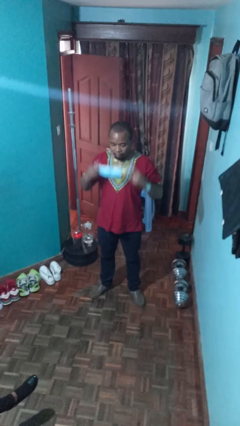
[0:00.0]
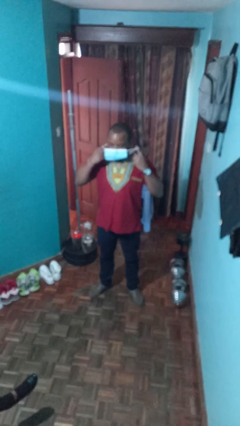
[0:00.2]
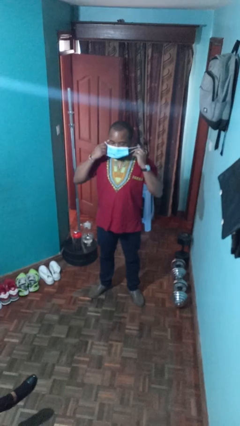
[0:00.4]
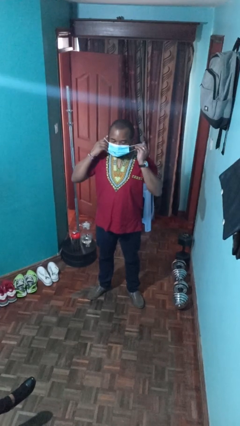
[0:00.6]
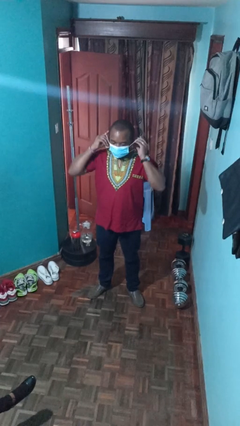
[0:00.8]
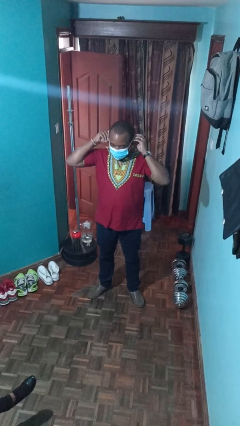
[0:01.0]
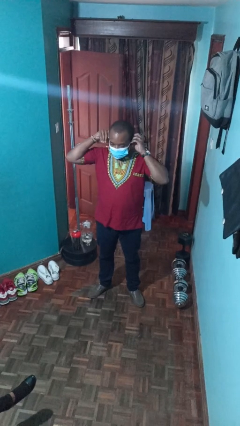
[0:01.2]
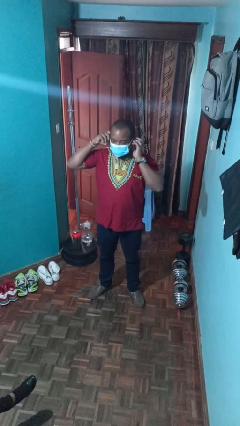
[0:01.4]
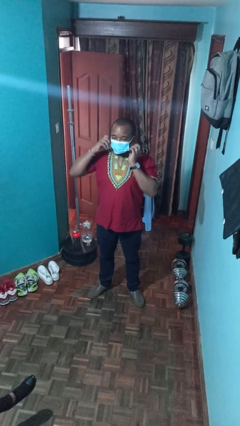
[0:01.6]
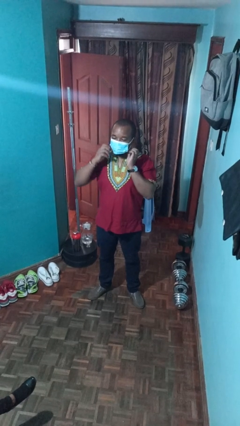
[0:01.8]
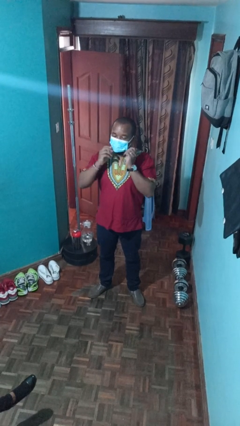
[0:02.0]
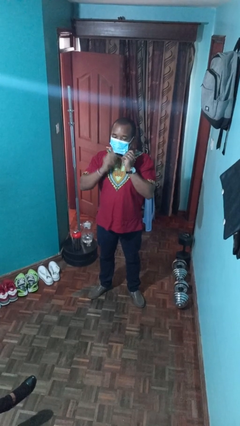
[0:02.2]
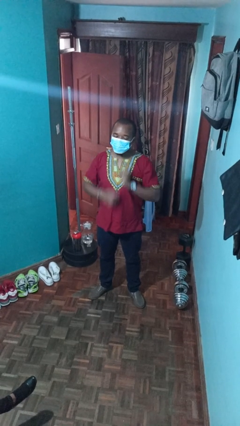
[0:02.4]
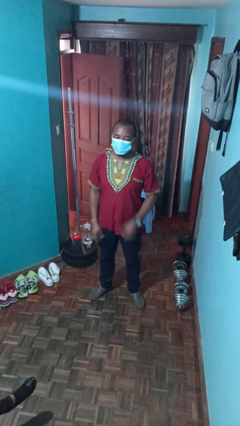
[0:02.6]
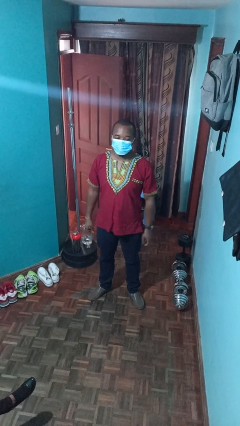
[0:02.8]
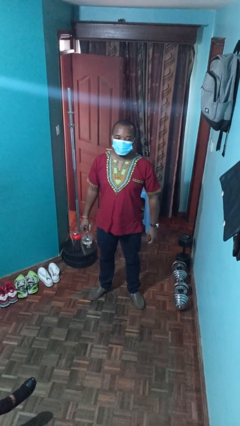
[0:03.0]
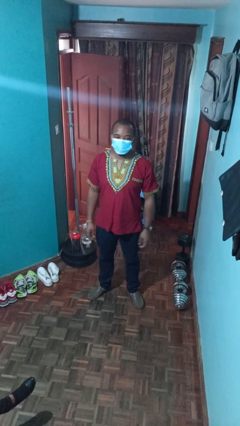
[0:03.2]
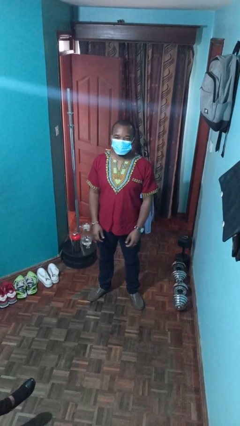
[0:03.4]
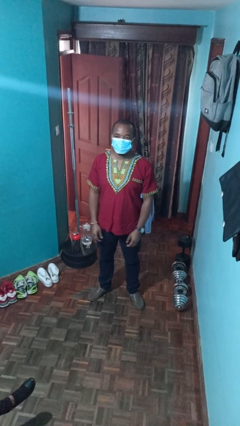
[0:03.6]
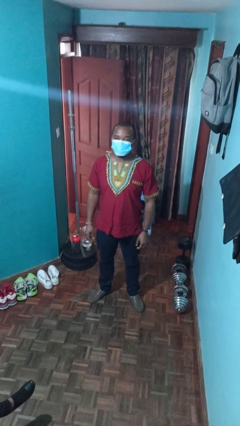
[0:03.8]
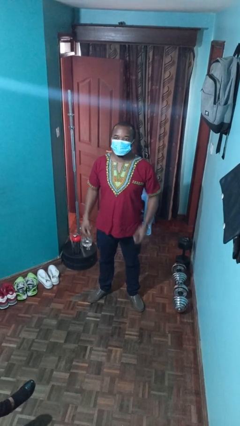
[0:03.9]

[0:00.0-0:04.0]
person puts on facemask

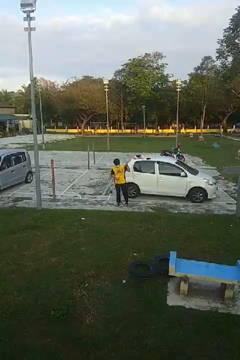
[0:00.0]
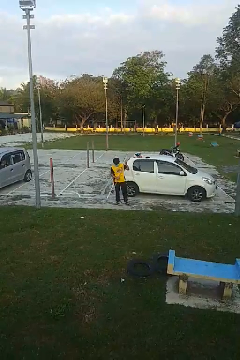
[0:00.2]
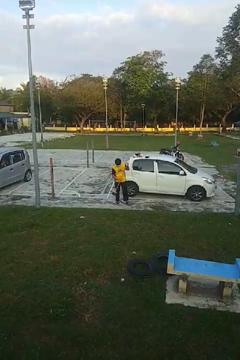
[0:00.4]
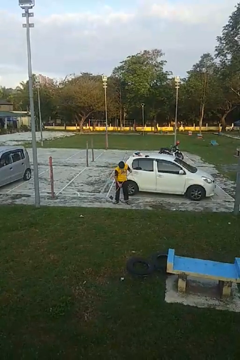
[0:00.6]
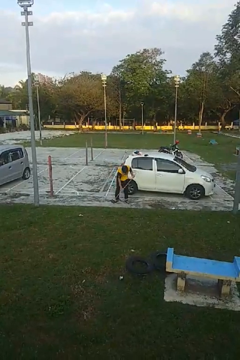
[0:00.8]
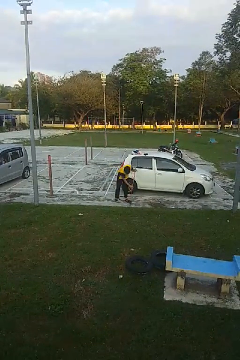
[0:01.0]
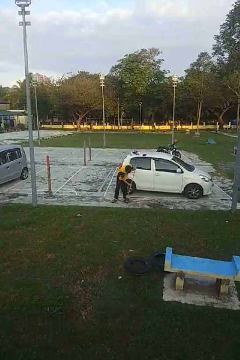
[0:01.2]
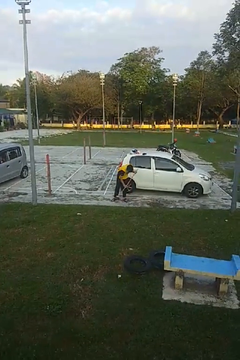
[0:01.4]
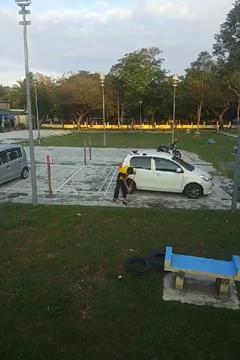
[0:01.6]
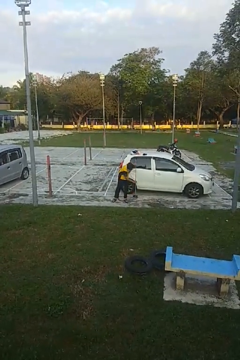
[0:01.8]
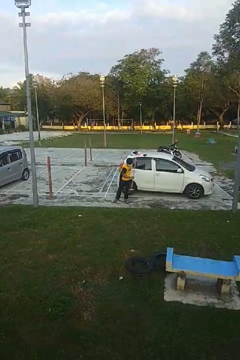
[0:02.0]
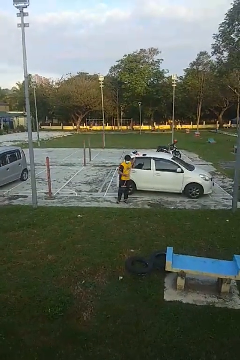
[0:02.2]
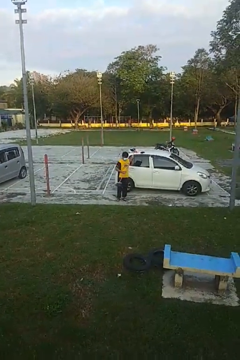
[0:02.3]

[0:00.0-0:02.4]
person sweeps floor

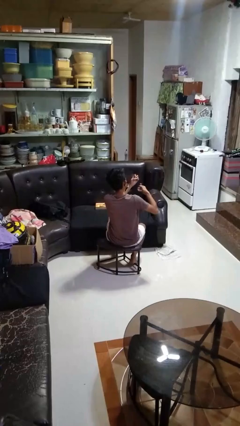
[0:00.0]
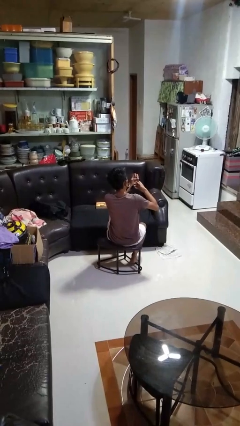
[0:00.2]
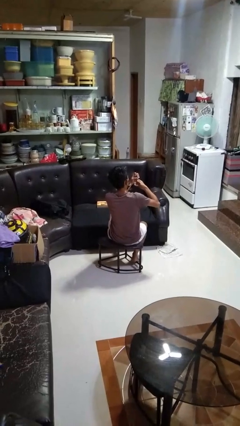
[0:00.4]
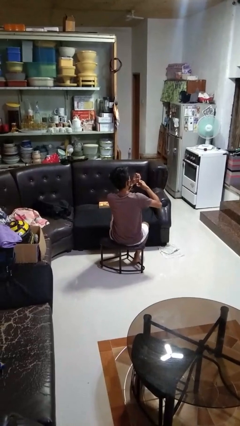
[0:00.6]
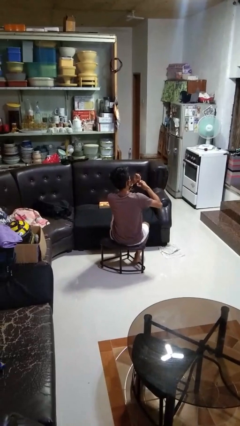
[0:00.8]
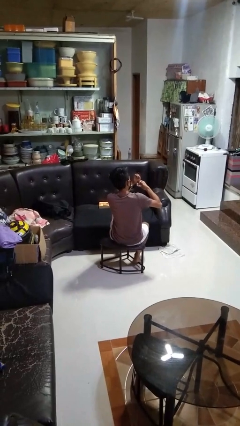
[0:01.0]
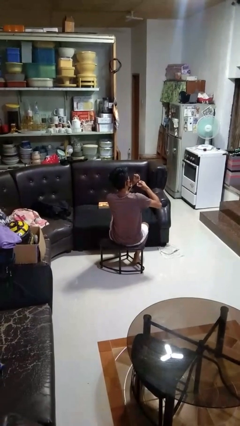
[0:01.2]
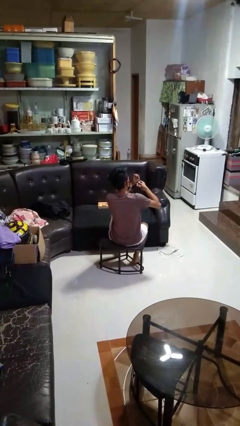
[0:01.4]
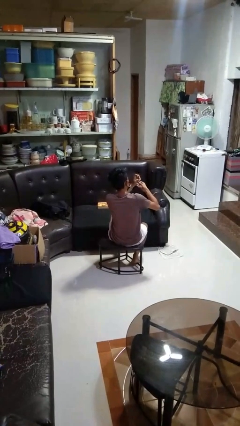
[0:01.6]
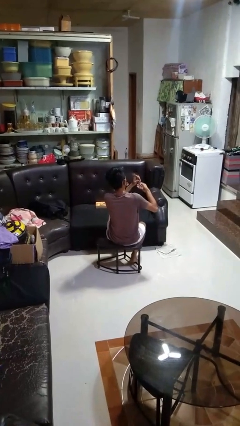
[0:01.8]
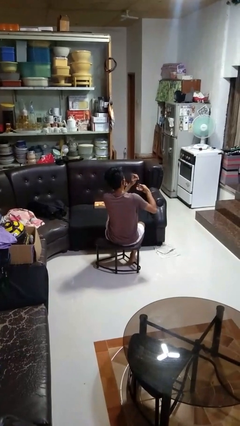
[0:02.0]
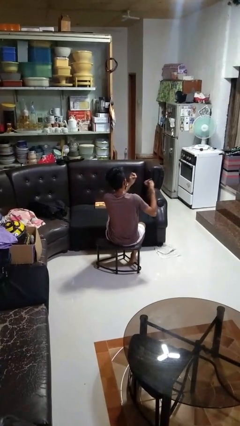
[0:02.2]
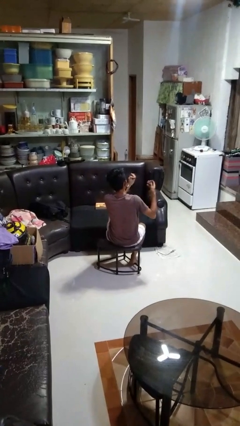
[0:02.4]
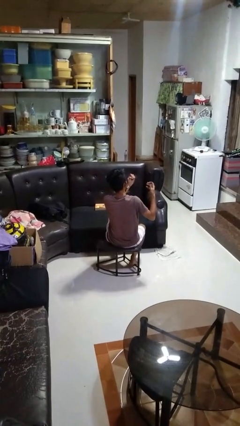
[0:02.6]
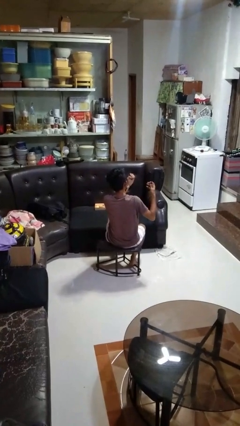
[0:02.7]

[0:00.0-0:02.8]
person clips fingernails

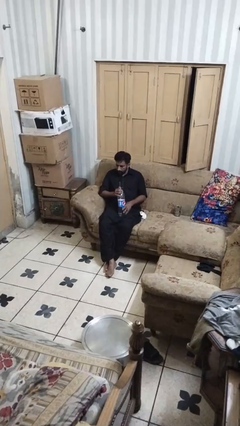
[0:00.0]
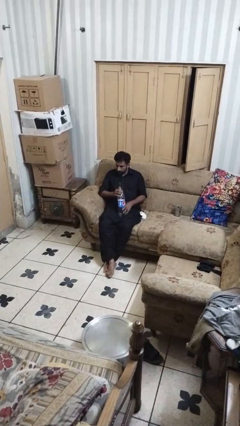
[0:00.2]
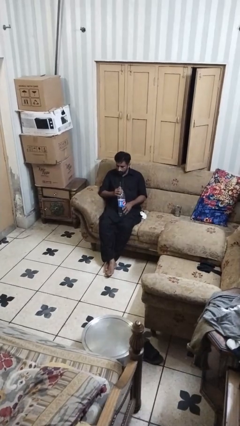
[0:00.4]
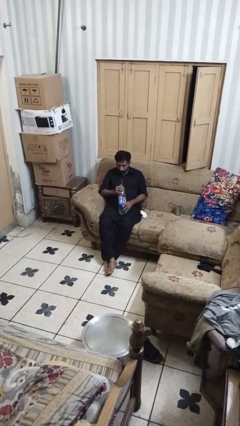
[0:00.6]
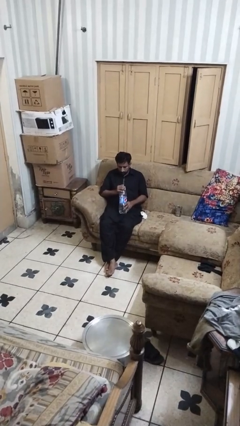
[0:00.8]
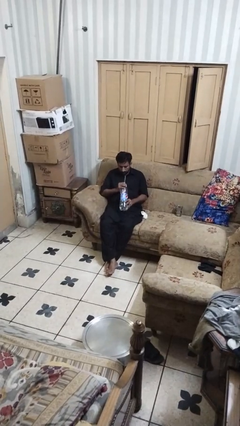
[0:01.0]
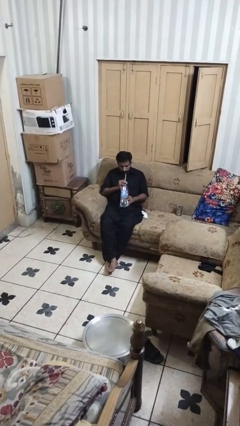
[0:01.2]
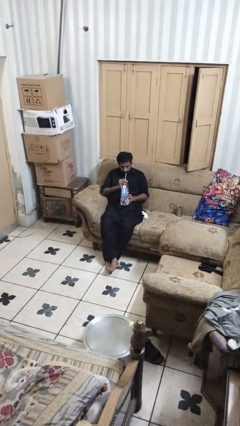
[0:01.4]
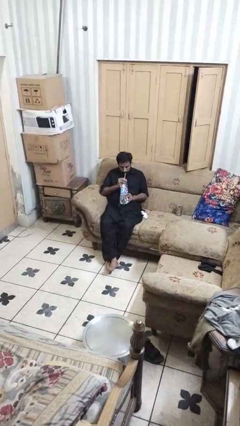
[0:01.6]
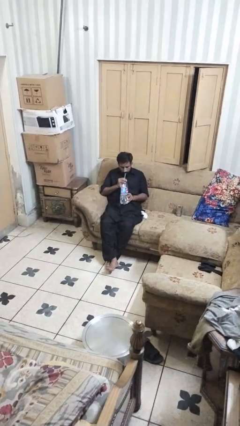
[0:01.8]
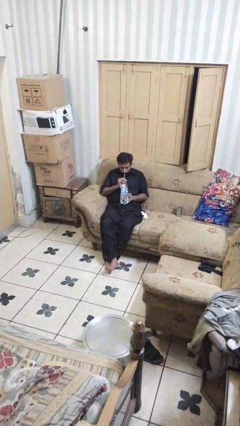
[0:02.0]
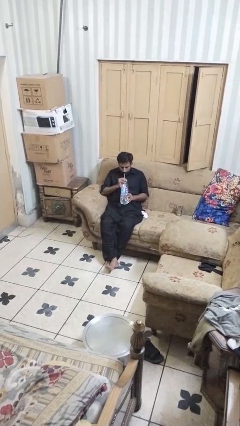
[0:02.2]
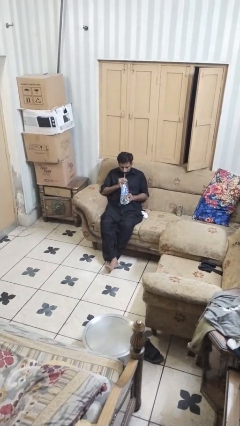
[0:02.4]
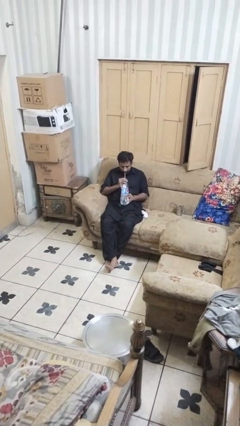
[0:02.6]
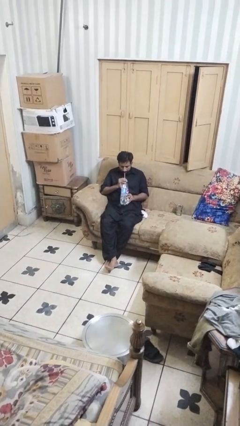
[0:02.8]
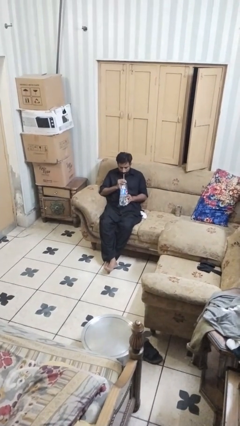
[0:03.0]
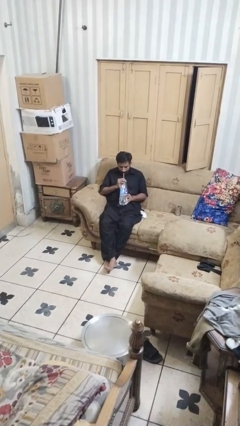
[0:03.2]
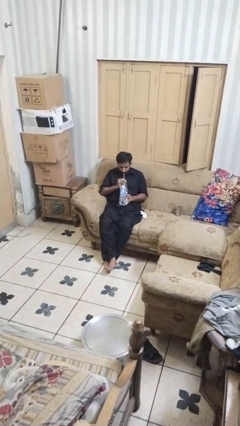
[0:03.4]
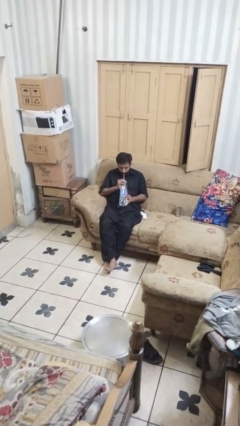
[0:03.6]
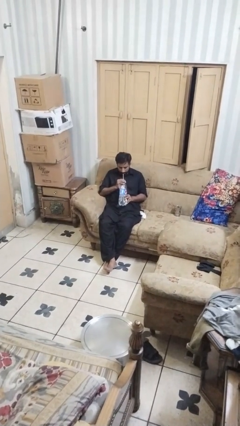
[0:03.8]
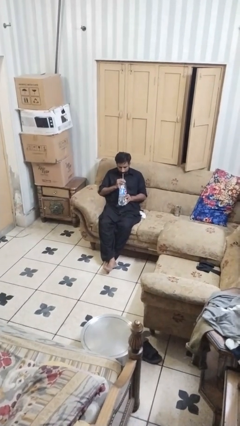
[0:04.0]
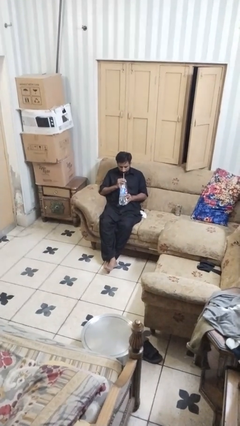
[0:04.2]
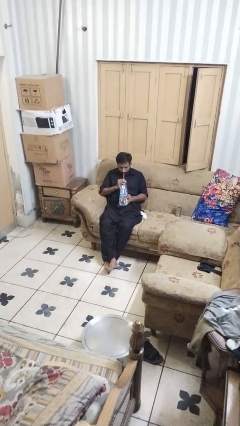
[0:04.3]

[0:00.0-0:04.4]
person drinks from straw

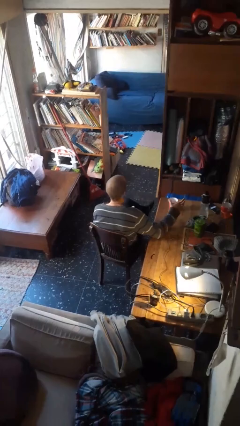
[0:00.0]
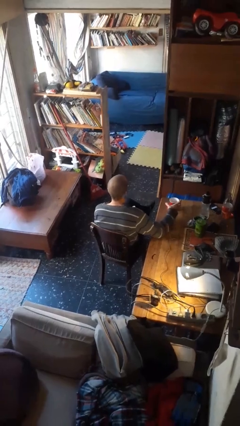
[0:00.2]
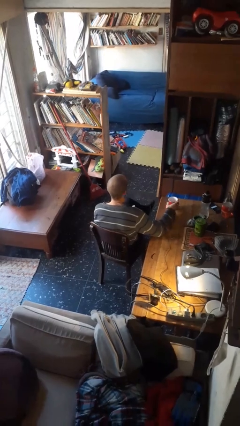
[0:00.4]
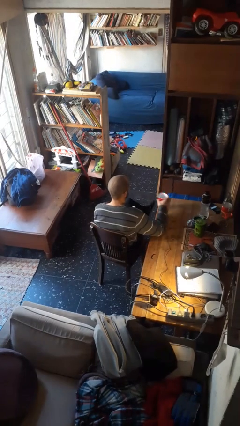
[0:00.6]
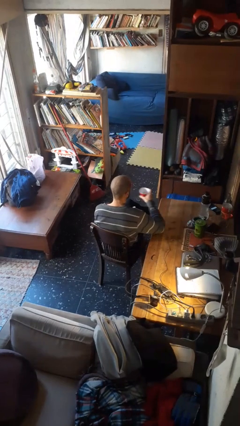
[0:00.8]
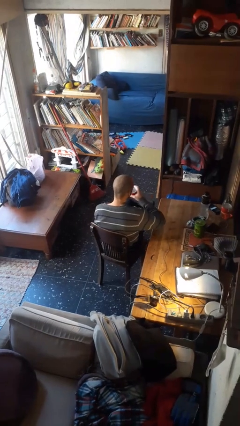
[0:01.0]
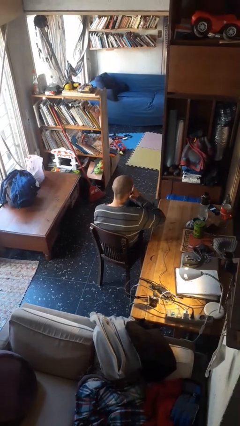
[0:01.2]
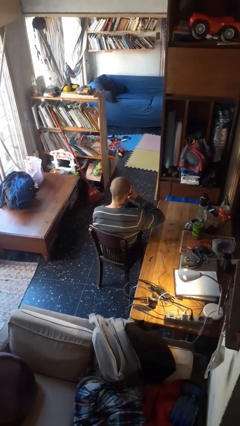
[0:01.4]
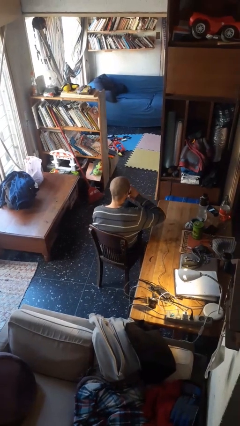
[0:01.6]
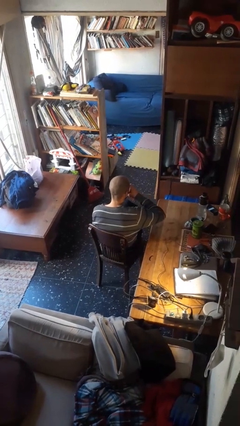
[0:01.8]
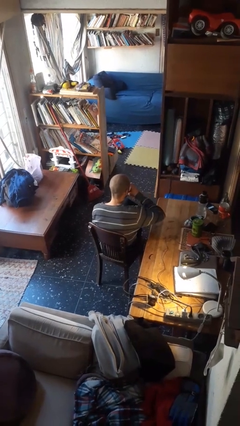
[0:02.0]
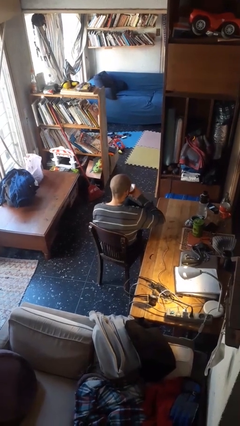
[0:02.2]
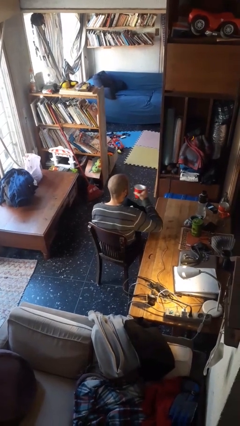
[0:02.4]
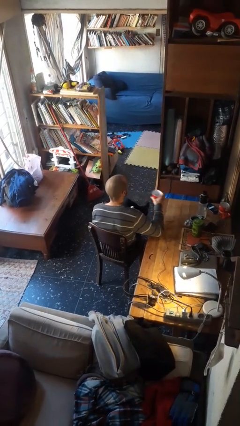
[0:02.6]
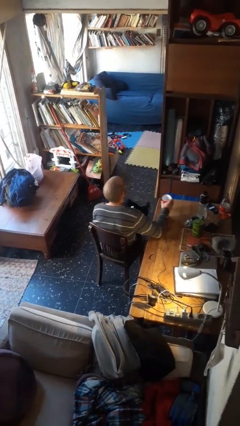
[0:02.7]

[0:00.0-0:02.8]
person drinks from cup

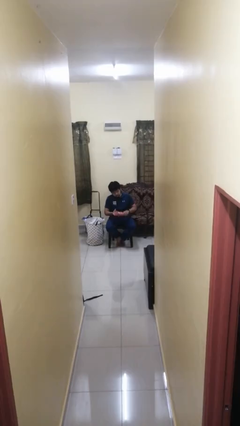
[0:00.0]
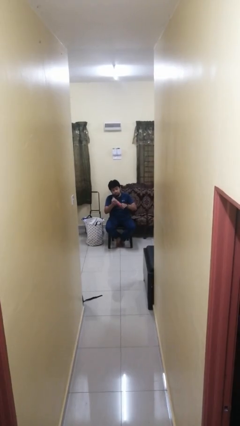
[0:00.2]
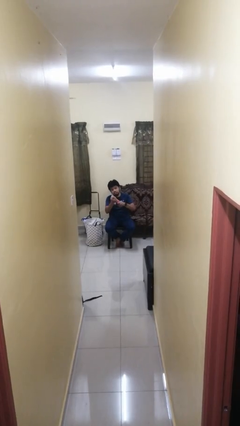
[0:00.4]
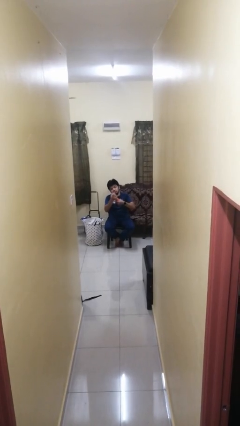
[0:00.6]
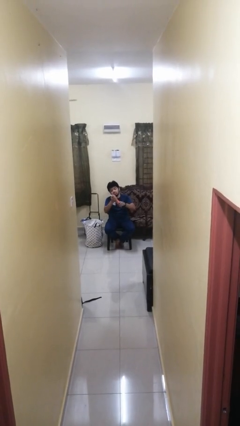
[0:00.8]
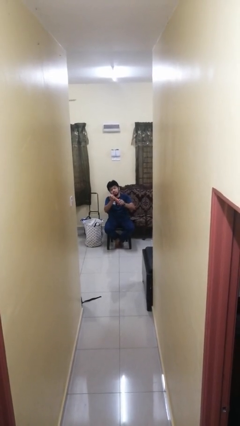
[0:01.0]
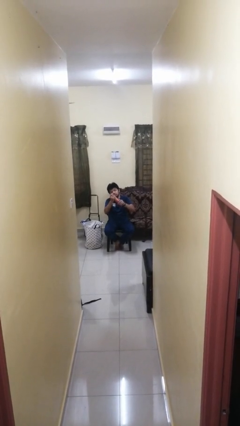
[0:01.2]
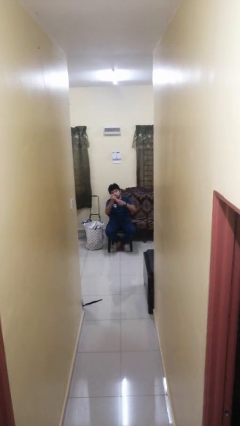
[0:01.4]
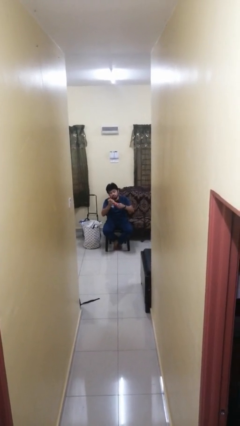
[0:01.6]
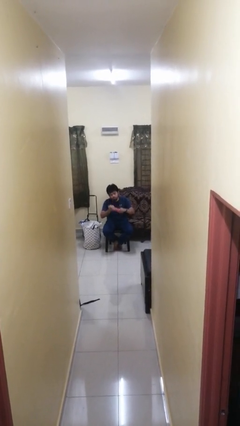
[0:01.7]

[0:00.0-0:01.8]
person squeezes object
